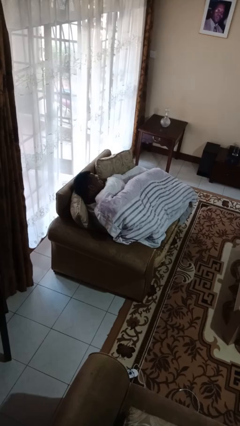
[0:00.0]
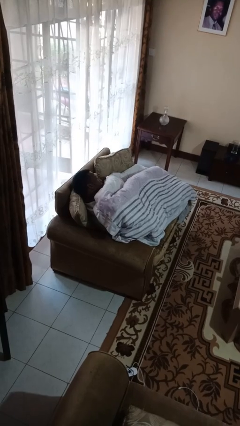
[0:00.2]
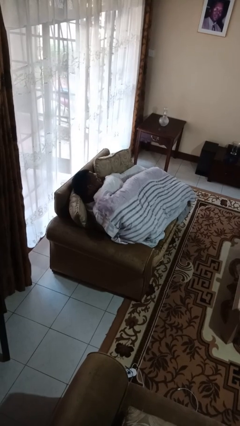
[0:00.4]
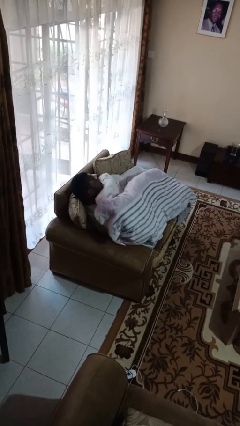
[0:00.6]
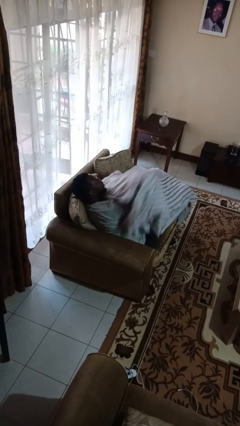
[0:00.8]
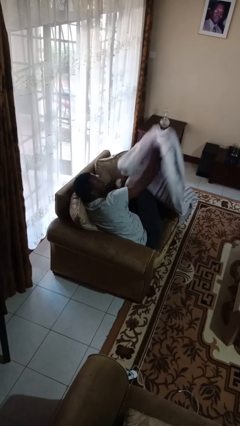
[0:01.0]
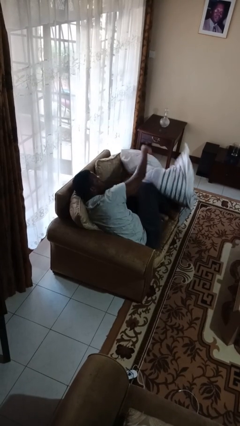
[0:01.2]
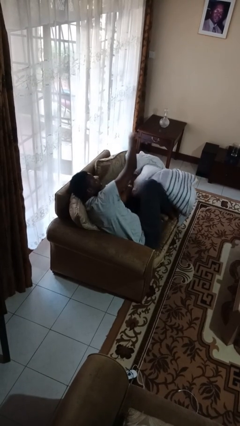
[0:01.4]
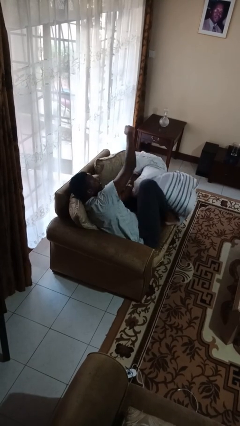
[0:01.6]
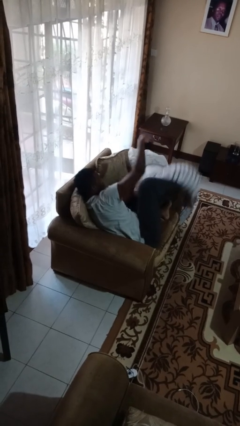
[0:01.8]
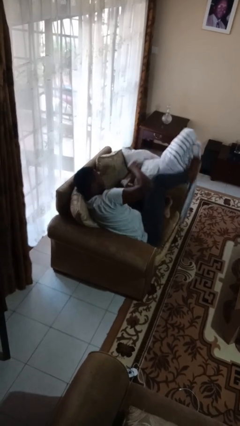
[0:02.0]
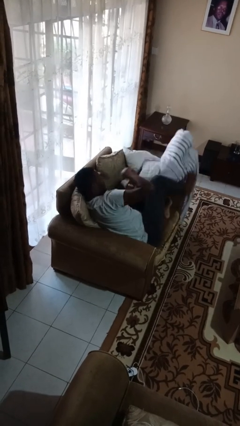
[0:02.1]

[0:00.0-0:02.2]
person uncovers with blanket

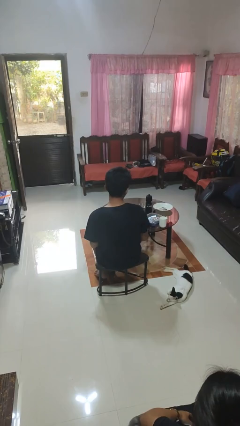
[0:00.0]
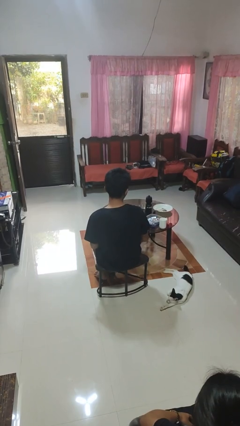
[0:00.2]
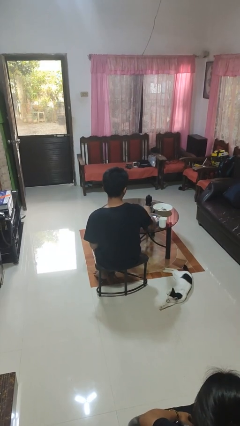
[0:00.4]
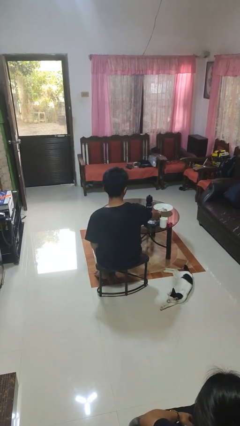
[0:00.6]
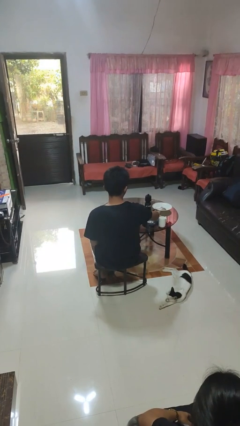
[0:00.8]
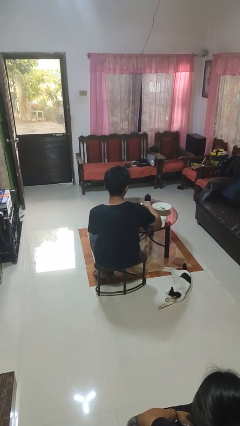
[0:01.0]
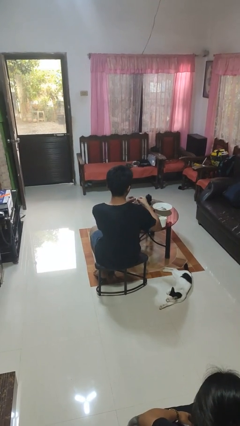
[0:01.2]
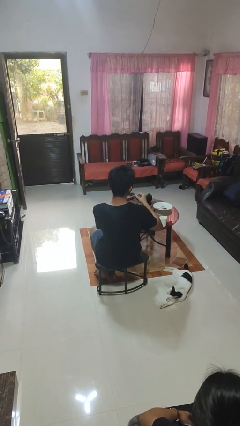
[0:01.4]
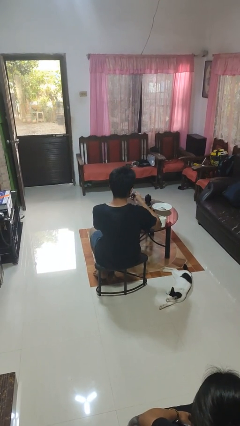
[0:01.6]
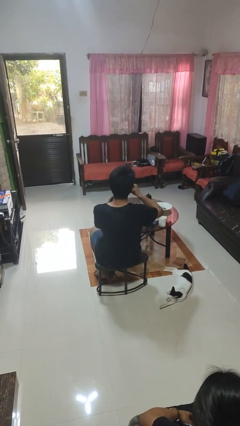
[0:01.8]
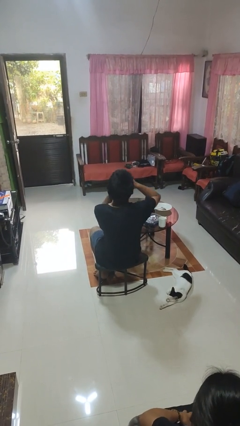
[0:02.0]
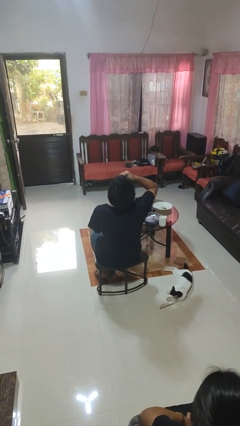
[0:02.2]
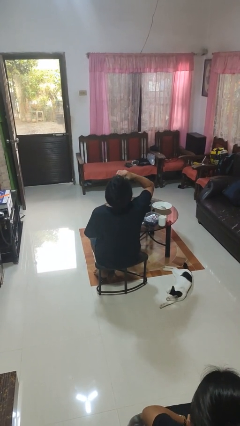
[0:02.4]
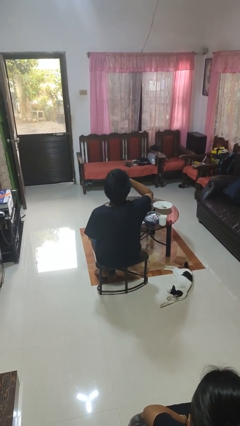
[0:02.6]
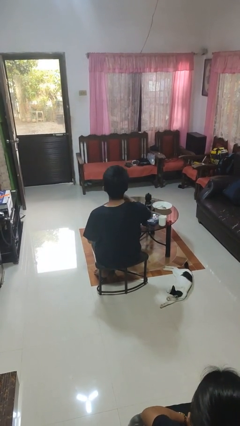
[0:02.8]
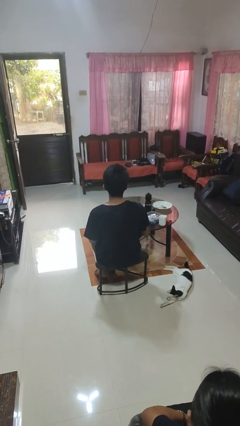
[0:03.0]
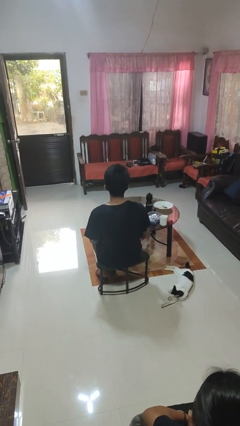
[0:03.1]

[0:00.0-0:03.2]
person takes medicine pills

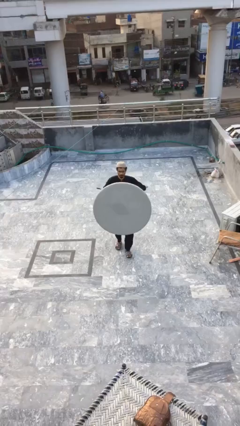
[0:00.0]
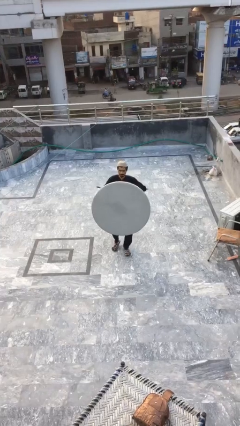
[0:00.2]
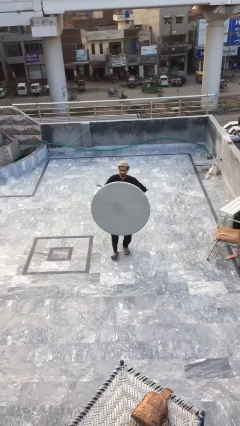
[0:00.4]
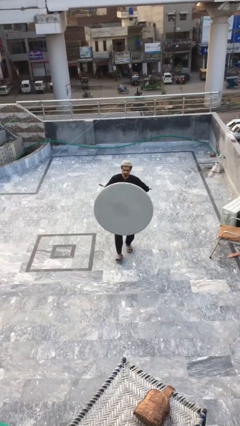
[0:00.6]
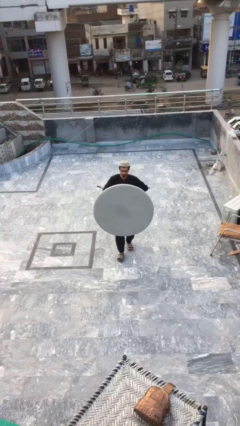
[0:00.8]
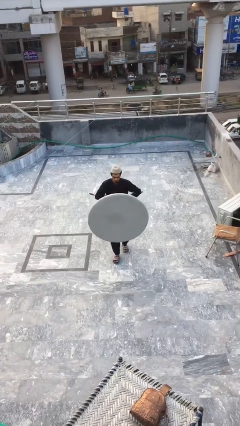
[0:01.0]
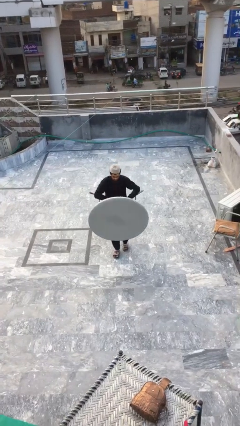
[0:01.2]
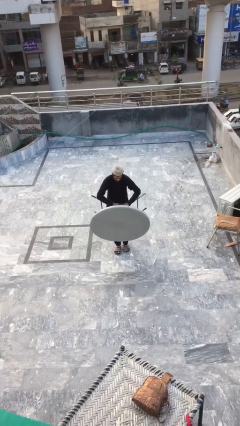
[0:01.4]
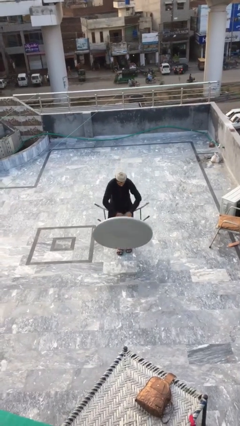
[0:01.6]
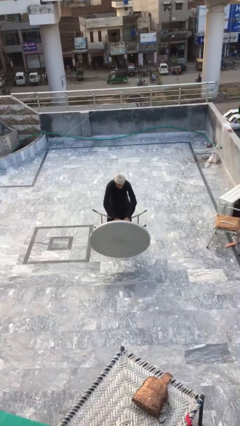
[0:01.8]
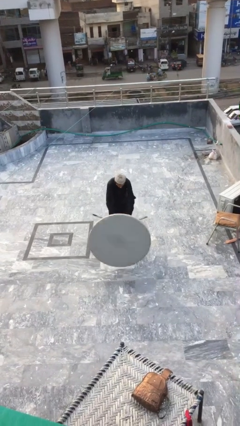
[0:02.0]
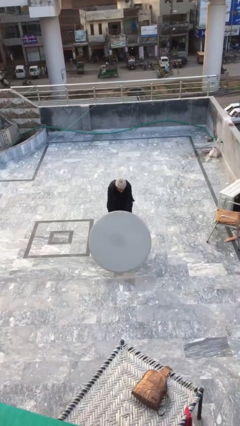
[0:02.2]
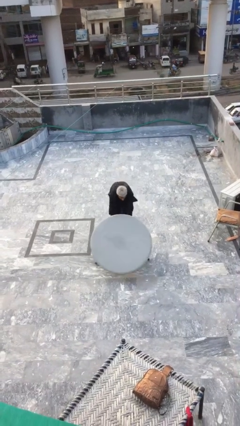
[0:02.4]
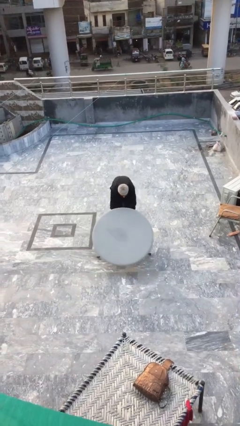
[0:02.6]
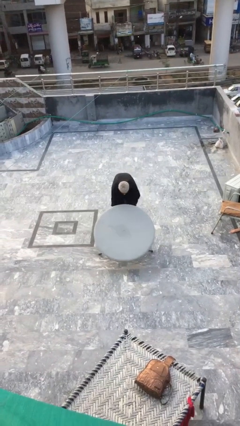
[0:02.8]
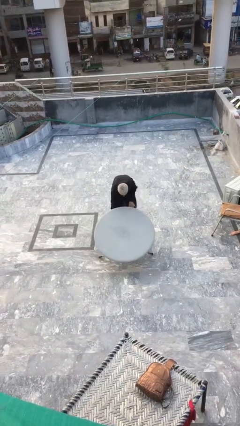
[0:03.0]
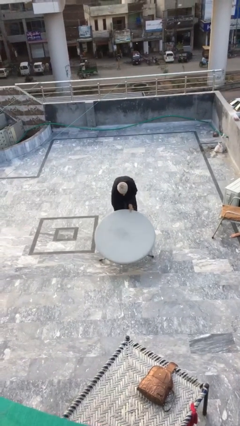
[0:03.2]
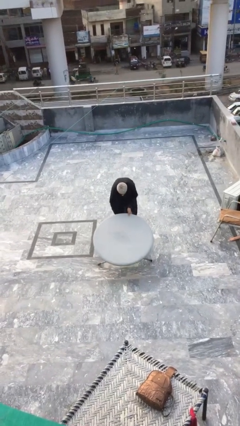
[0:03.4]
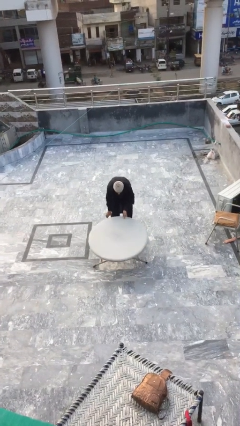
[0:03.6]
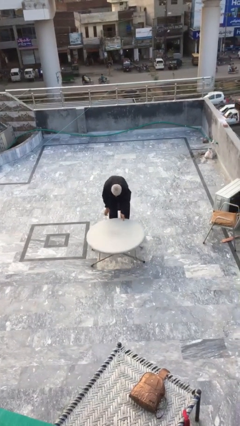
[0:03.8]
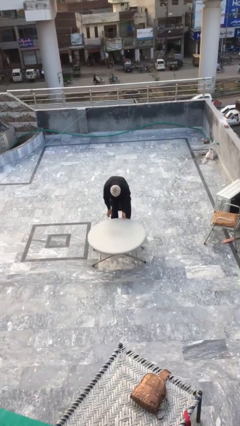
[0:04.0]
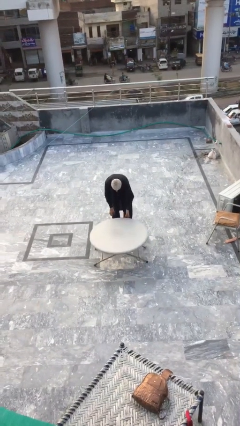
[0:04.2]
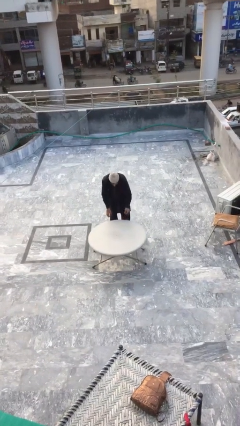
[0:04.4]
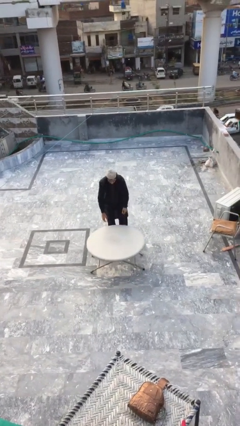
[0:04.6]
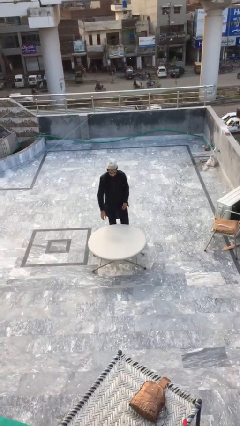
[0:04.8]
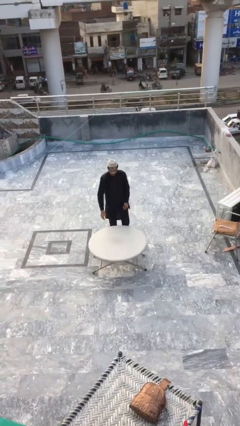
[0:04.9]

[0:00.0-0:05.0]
person puts down object on floor

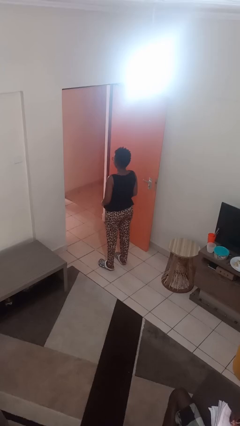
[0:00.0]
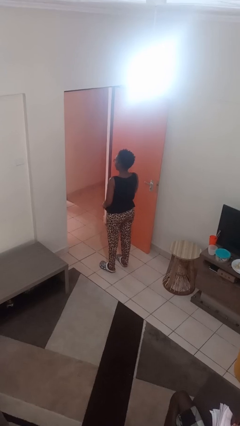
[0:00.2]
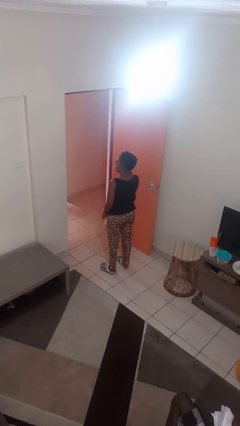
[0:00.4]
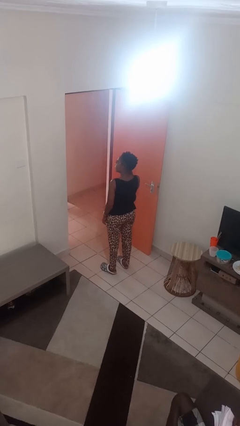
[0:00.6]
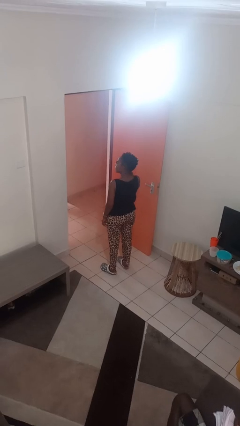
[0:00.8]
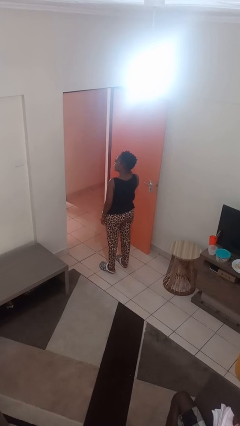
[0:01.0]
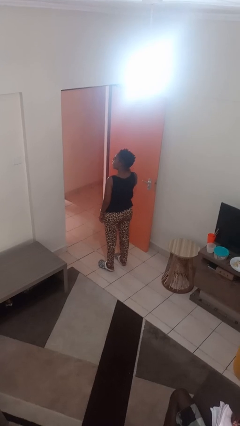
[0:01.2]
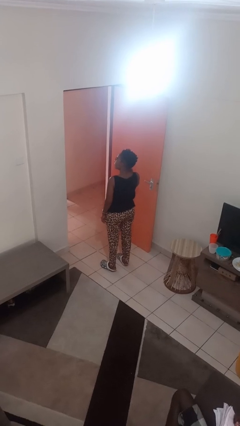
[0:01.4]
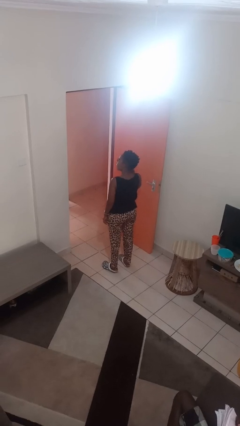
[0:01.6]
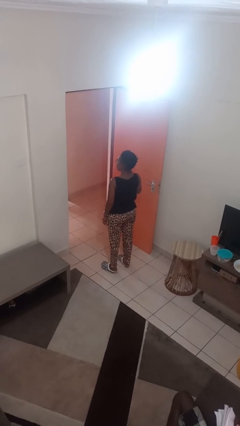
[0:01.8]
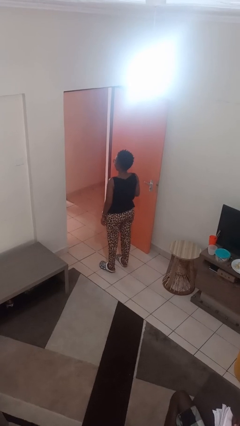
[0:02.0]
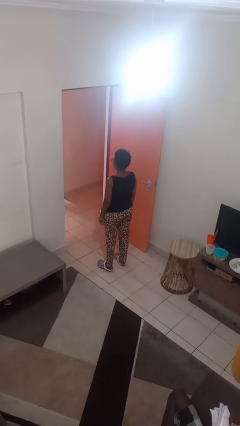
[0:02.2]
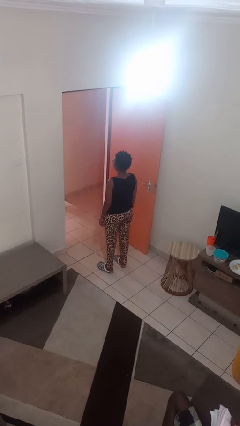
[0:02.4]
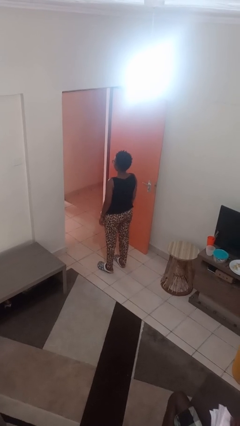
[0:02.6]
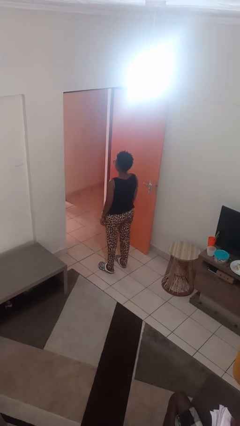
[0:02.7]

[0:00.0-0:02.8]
person takes off earrings

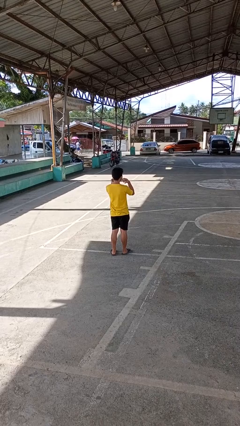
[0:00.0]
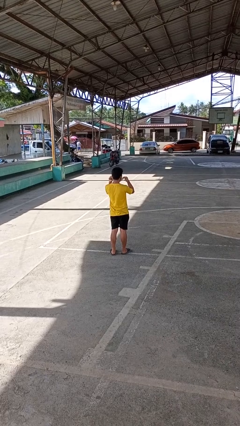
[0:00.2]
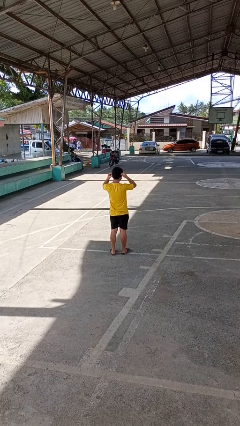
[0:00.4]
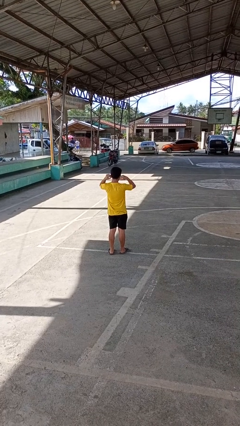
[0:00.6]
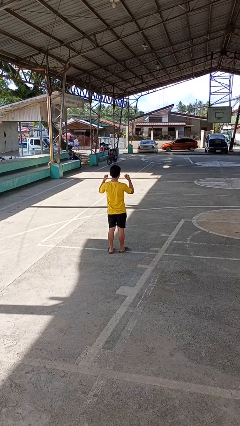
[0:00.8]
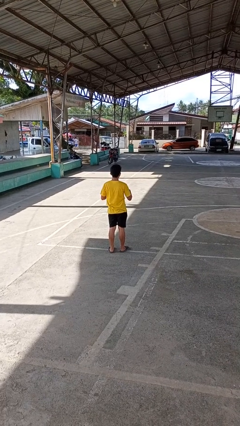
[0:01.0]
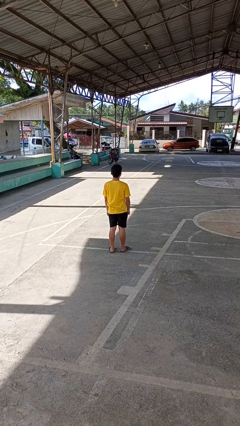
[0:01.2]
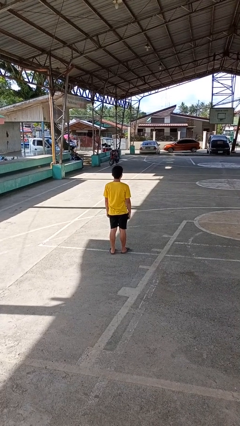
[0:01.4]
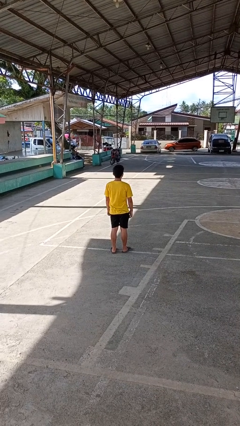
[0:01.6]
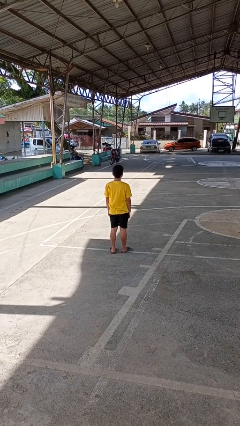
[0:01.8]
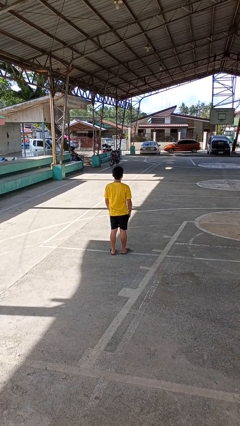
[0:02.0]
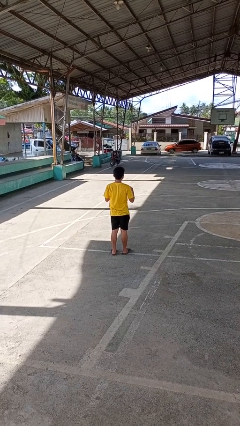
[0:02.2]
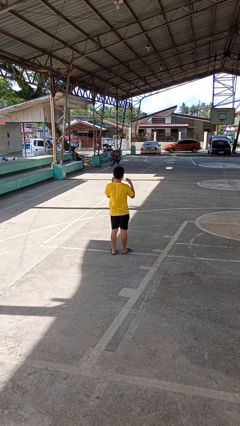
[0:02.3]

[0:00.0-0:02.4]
person puts on facemask

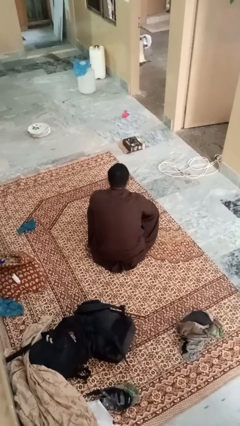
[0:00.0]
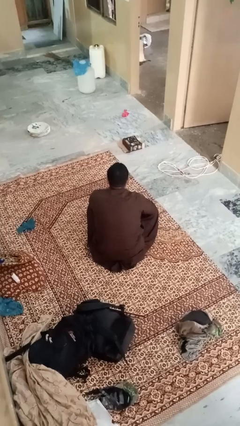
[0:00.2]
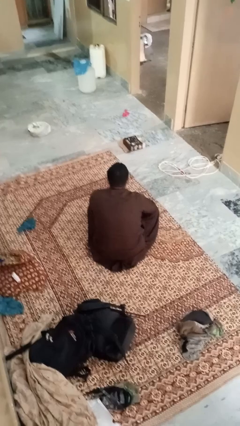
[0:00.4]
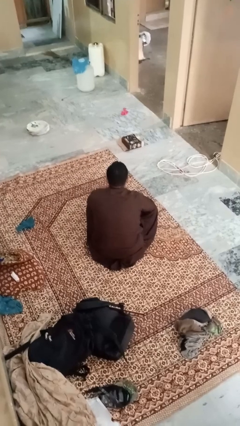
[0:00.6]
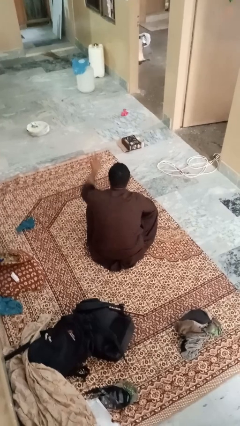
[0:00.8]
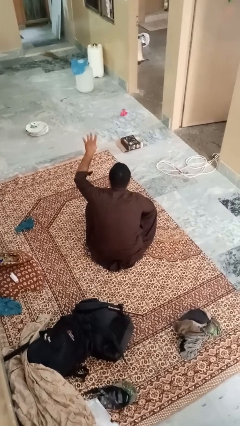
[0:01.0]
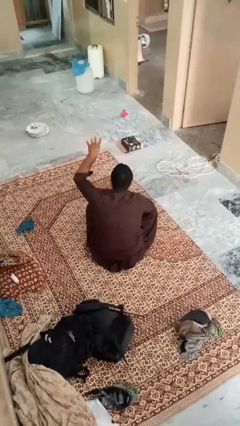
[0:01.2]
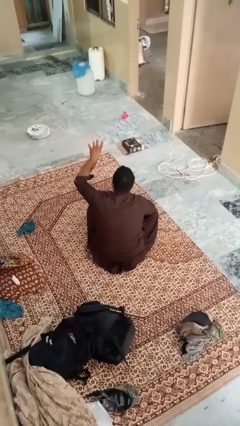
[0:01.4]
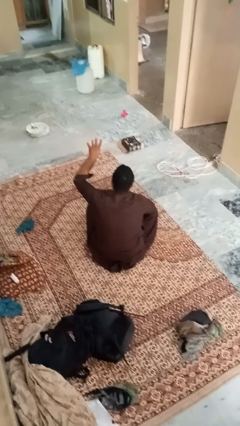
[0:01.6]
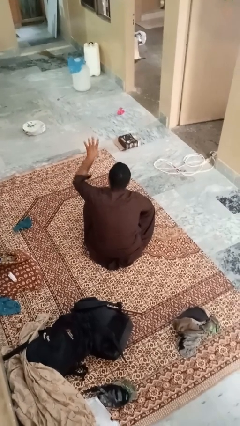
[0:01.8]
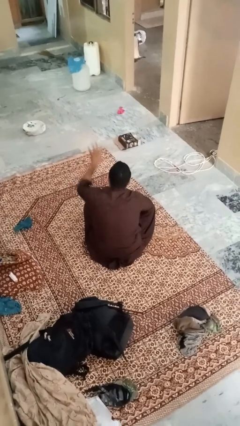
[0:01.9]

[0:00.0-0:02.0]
person gestures number four
